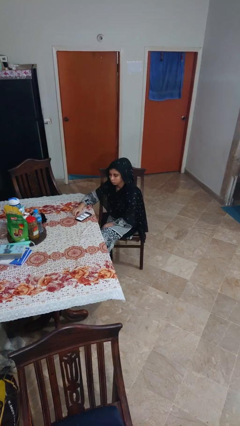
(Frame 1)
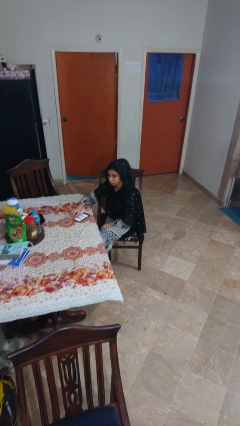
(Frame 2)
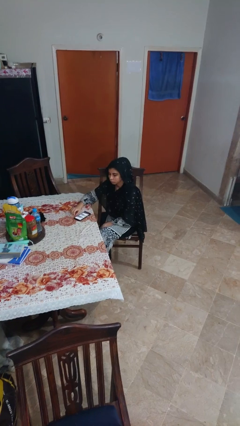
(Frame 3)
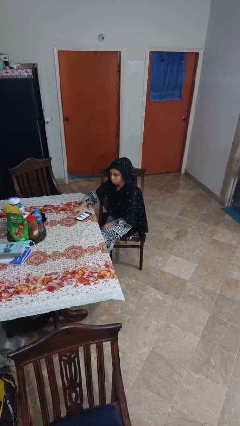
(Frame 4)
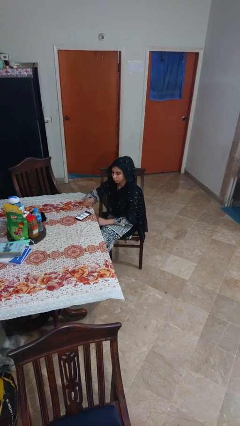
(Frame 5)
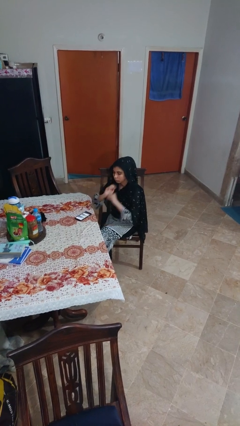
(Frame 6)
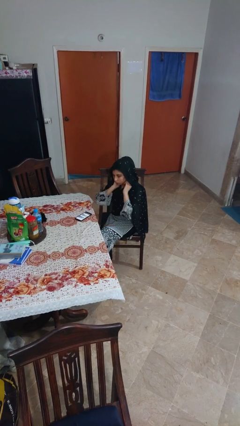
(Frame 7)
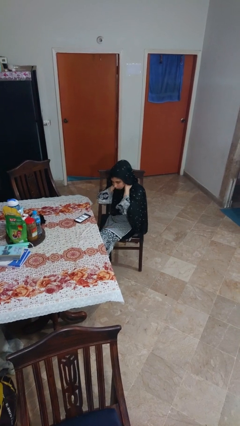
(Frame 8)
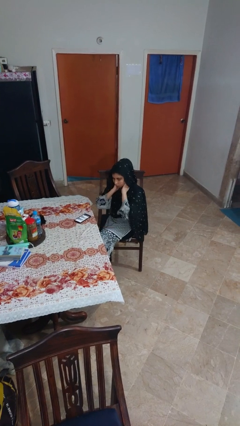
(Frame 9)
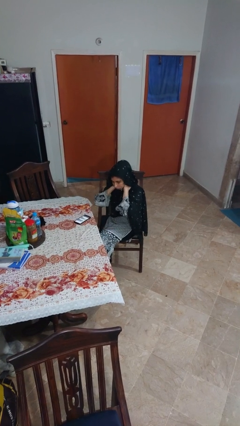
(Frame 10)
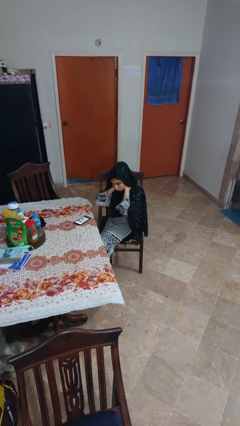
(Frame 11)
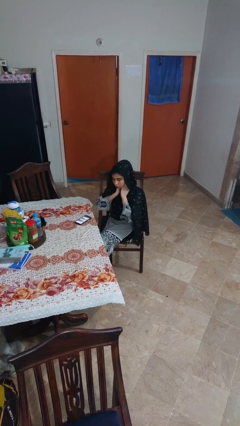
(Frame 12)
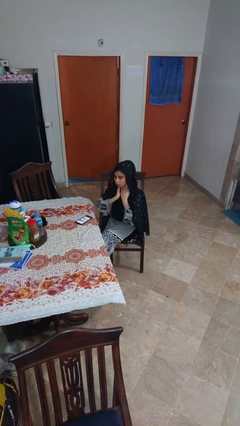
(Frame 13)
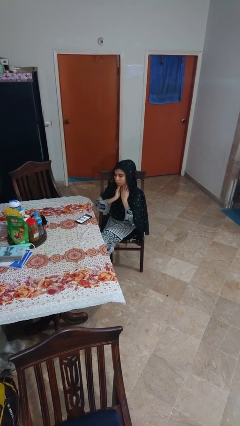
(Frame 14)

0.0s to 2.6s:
person rubs neck

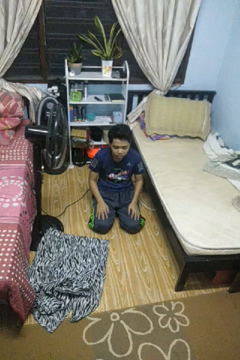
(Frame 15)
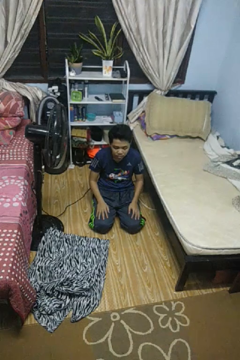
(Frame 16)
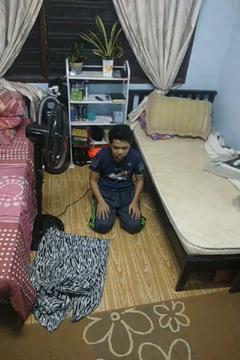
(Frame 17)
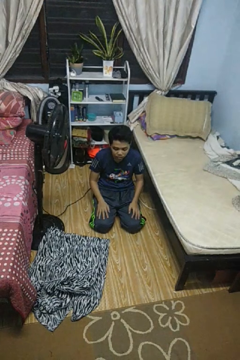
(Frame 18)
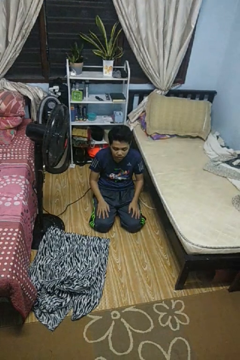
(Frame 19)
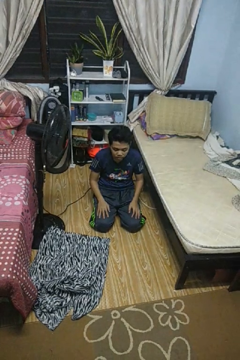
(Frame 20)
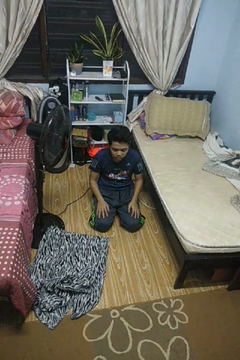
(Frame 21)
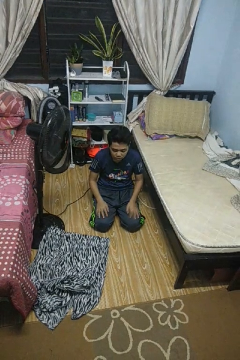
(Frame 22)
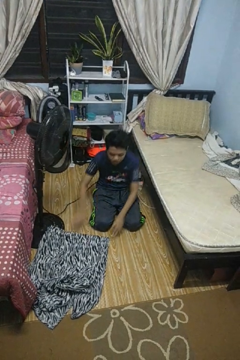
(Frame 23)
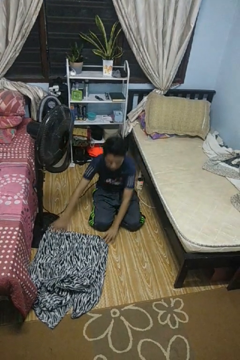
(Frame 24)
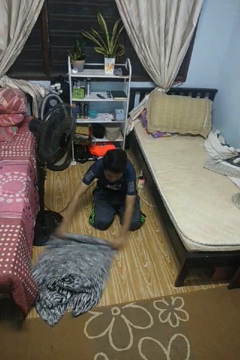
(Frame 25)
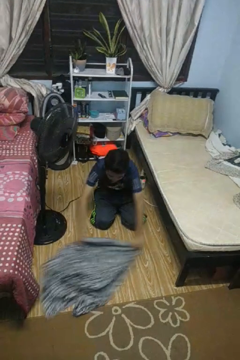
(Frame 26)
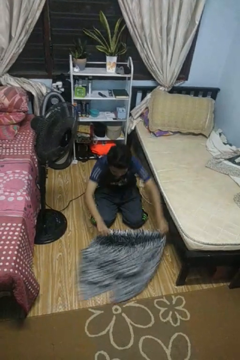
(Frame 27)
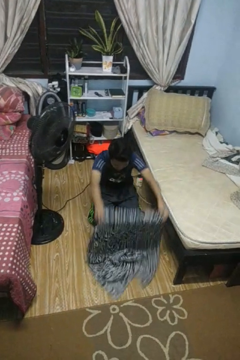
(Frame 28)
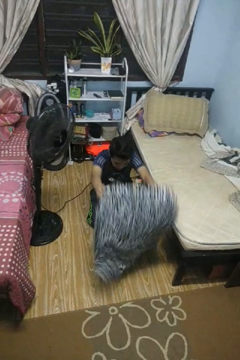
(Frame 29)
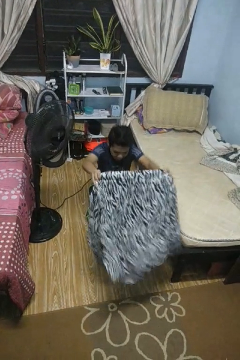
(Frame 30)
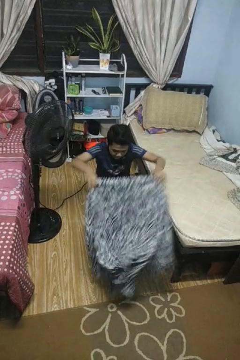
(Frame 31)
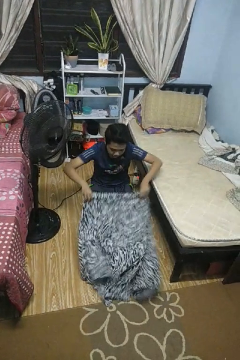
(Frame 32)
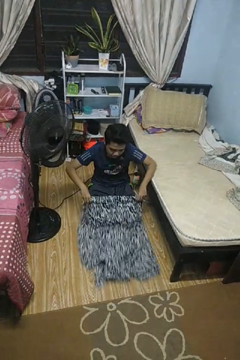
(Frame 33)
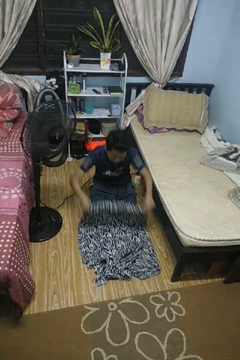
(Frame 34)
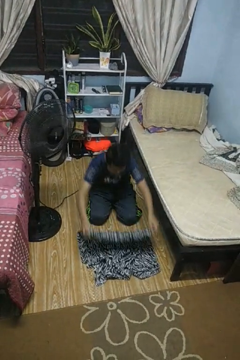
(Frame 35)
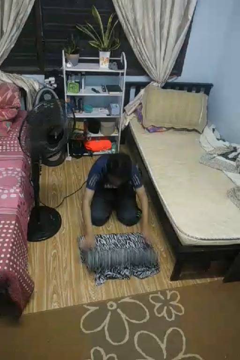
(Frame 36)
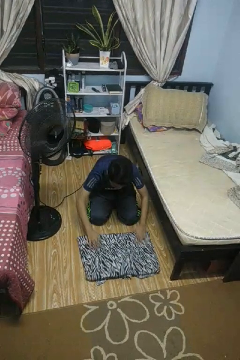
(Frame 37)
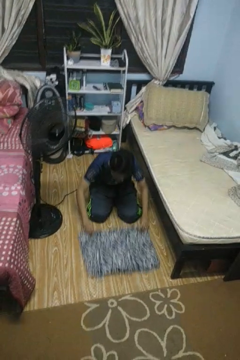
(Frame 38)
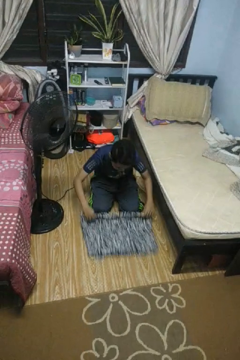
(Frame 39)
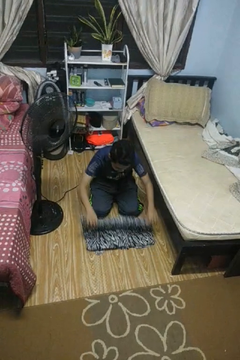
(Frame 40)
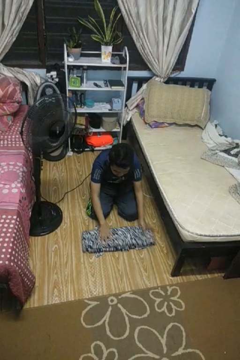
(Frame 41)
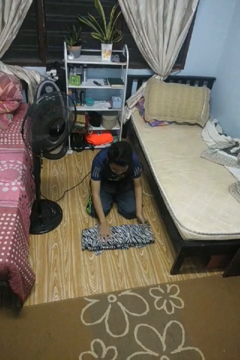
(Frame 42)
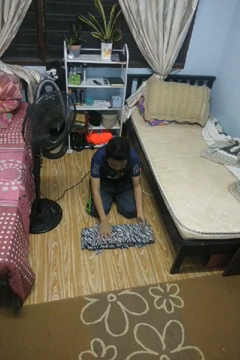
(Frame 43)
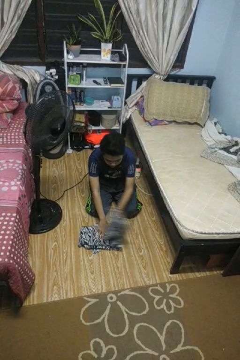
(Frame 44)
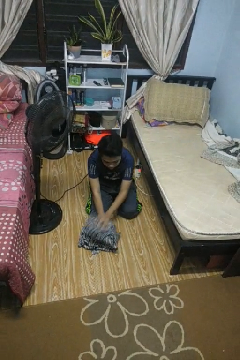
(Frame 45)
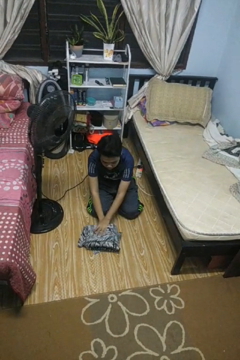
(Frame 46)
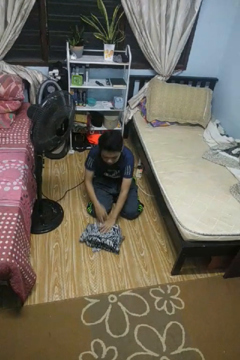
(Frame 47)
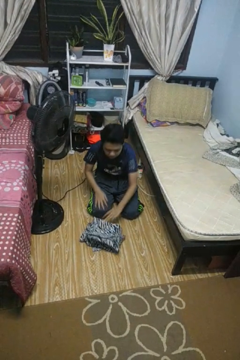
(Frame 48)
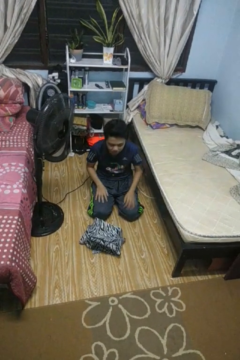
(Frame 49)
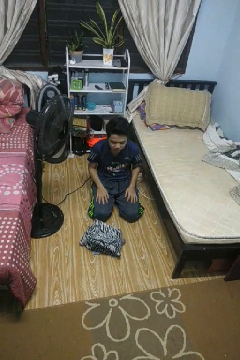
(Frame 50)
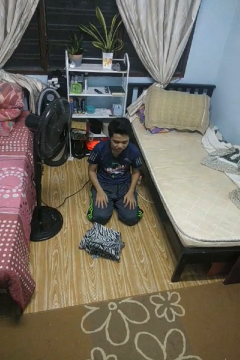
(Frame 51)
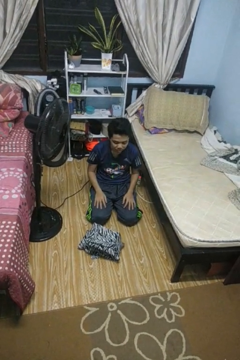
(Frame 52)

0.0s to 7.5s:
person folds blanket

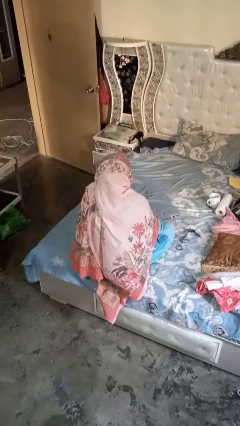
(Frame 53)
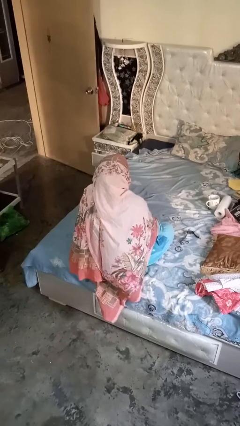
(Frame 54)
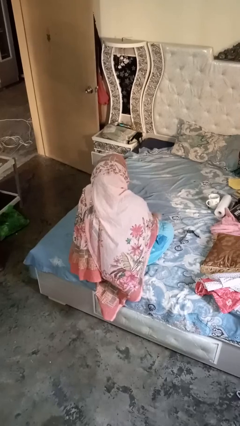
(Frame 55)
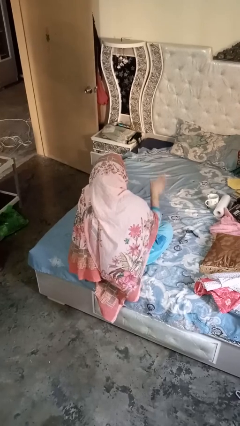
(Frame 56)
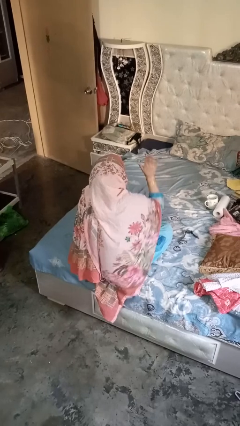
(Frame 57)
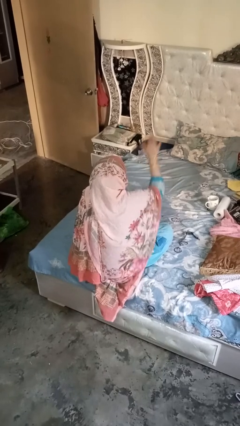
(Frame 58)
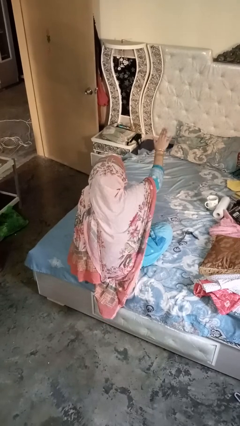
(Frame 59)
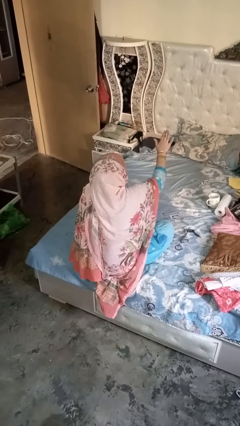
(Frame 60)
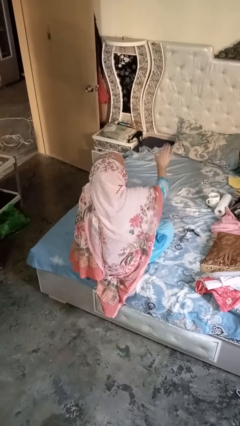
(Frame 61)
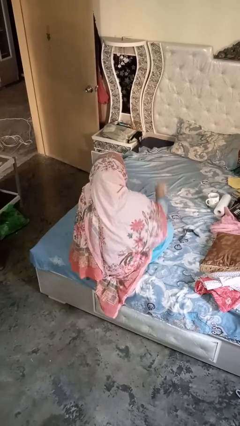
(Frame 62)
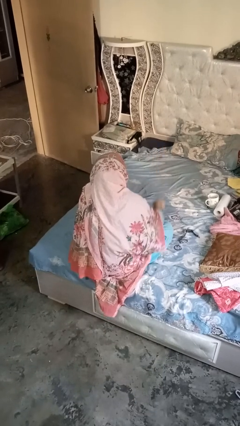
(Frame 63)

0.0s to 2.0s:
person gestures stop

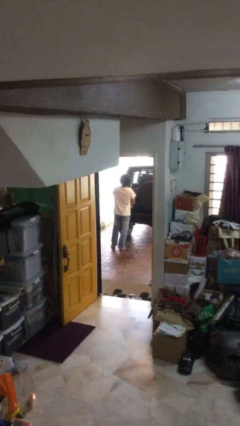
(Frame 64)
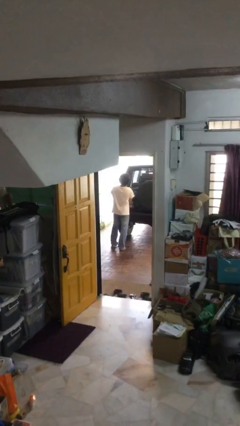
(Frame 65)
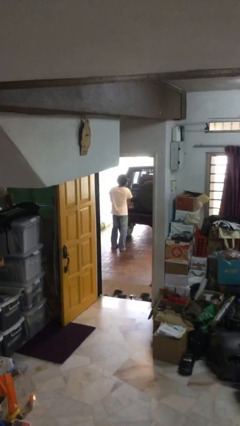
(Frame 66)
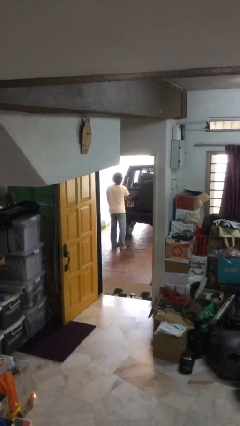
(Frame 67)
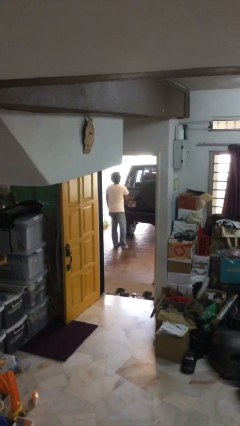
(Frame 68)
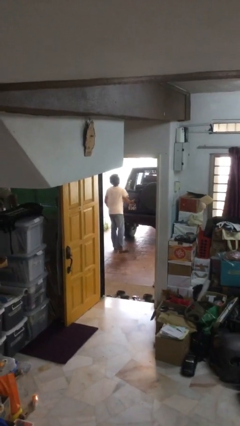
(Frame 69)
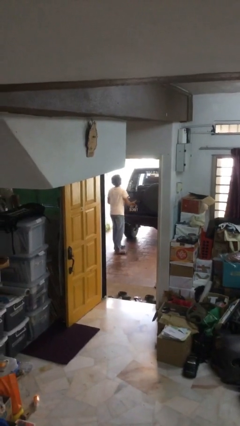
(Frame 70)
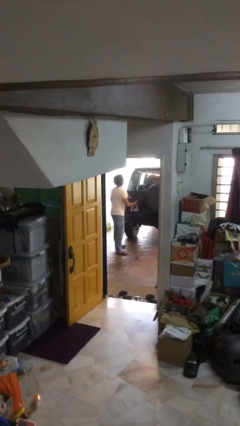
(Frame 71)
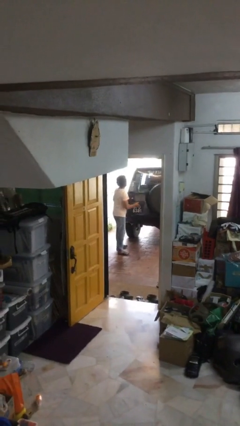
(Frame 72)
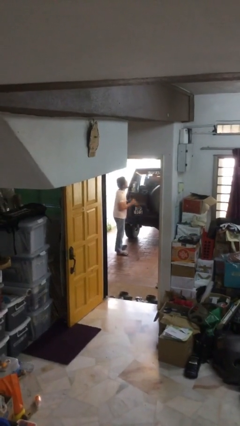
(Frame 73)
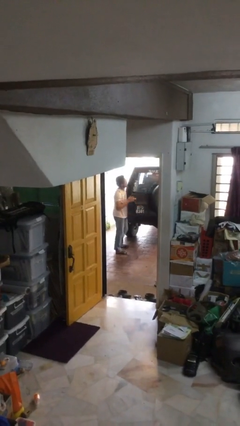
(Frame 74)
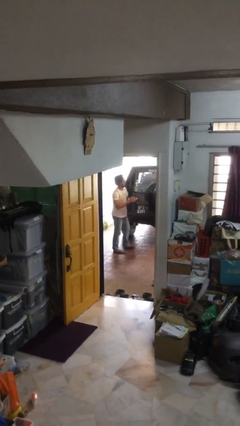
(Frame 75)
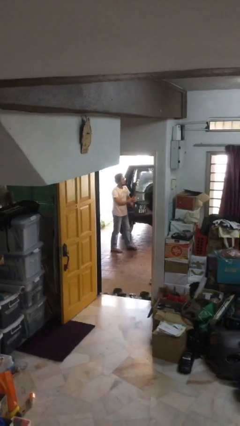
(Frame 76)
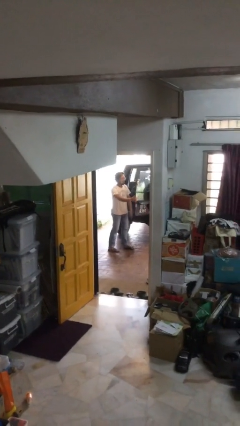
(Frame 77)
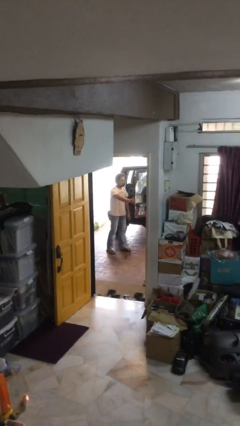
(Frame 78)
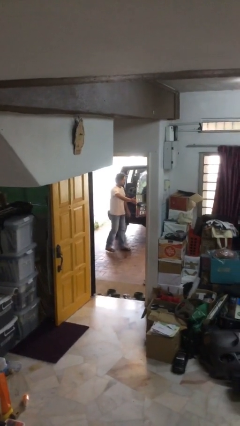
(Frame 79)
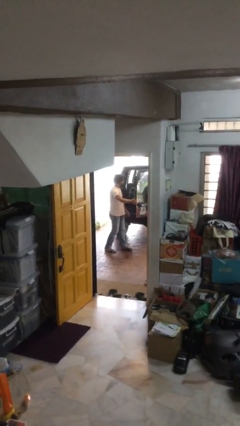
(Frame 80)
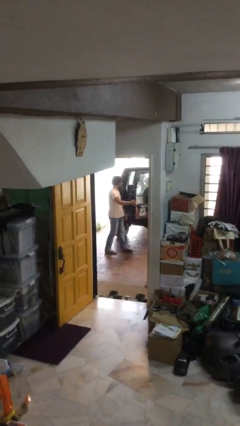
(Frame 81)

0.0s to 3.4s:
person opens car trunk

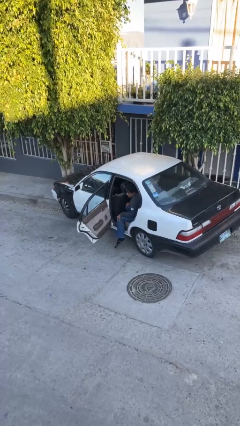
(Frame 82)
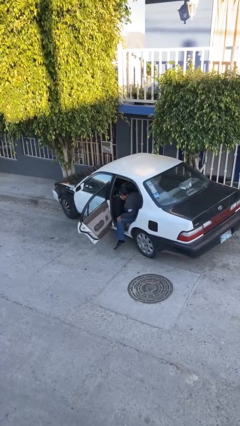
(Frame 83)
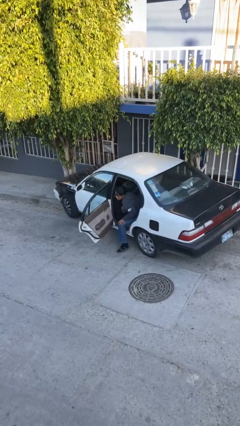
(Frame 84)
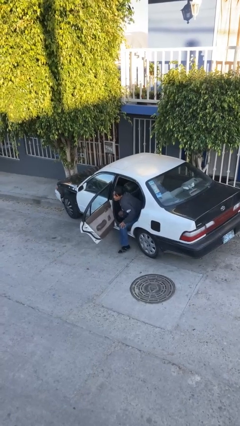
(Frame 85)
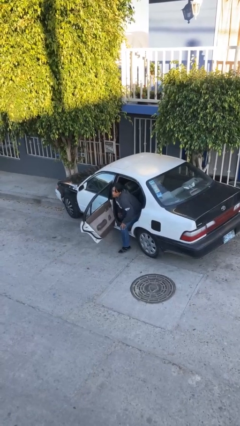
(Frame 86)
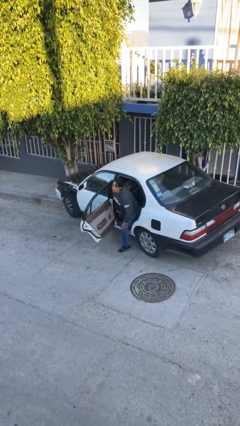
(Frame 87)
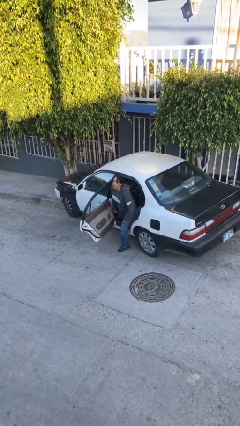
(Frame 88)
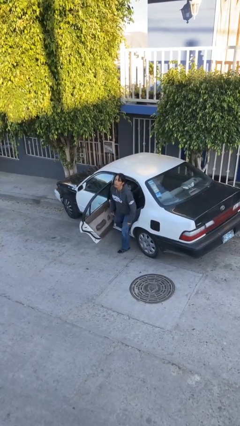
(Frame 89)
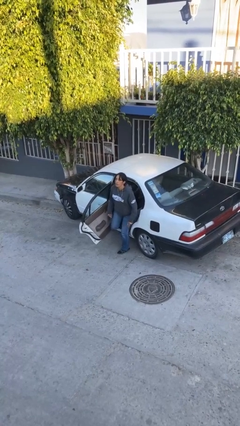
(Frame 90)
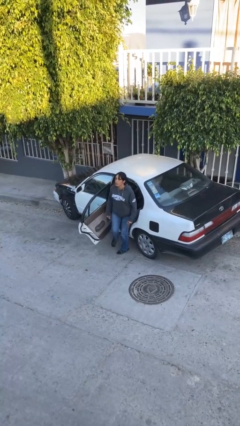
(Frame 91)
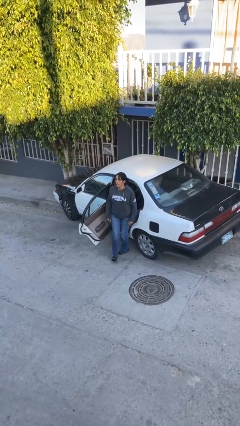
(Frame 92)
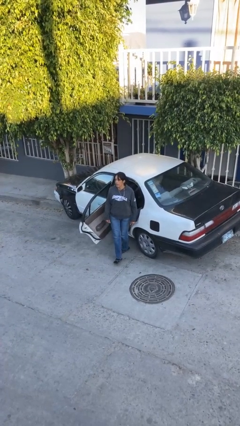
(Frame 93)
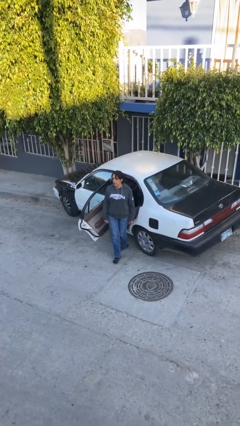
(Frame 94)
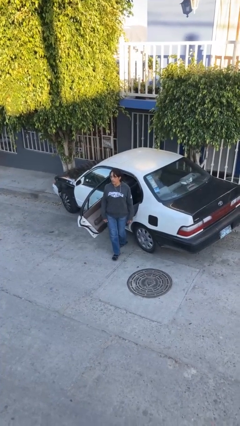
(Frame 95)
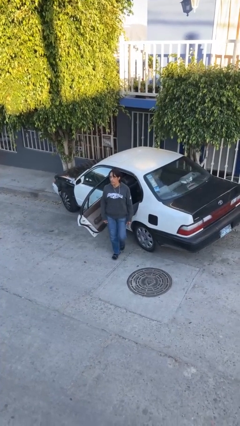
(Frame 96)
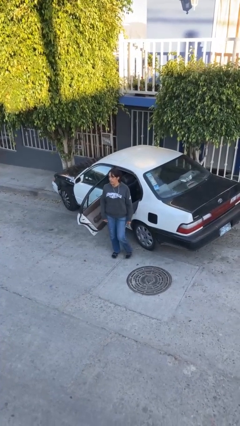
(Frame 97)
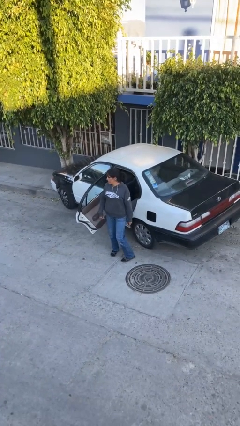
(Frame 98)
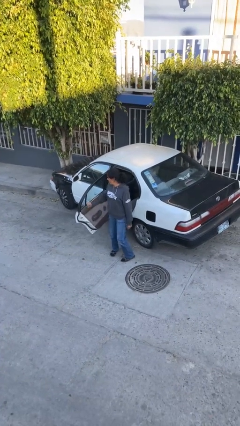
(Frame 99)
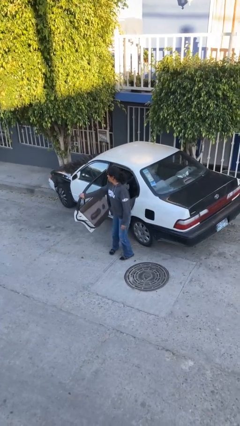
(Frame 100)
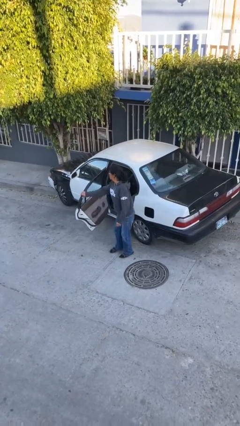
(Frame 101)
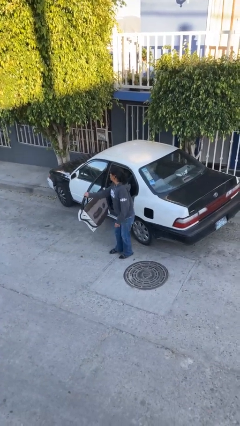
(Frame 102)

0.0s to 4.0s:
person exits car
